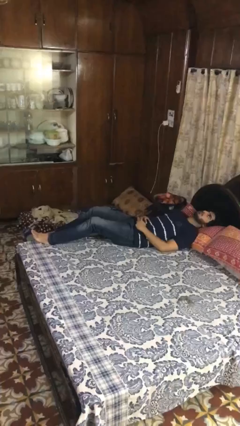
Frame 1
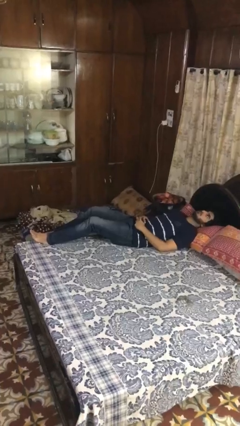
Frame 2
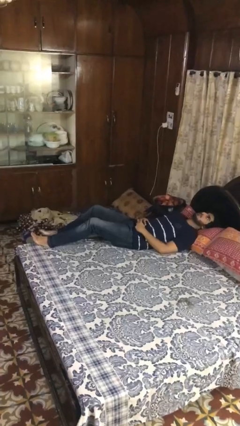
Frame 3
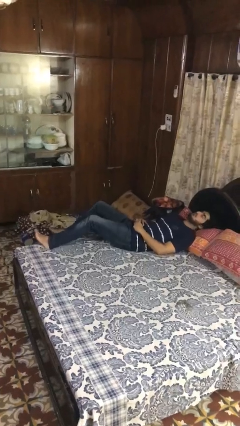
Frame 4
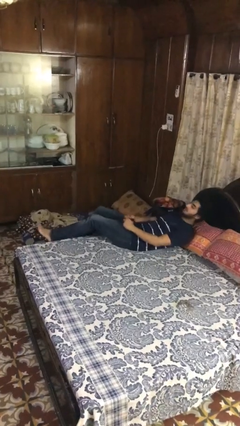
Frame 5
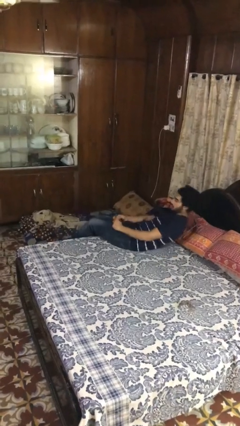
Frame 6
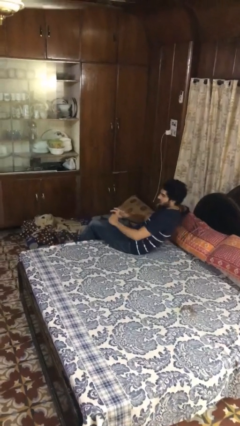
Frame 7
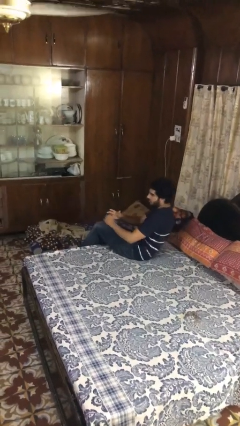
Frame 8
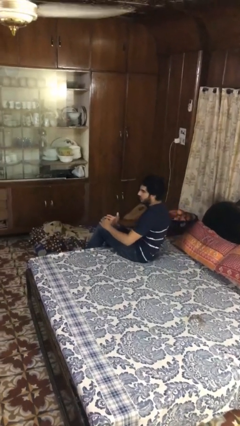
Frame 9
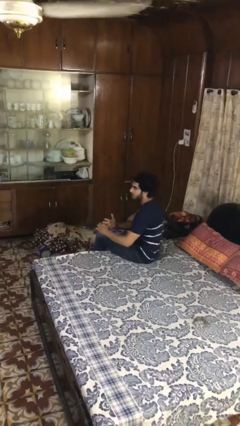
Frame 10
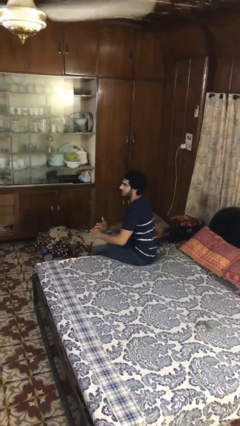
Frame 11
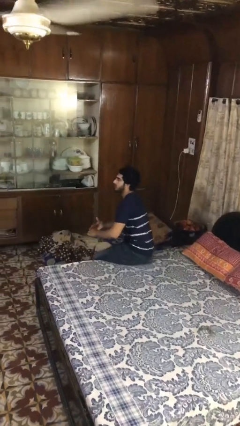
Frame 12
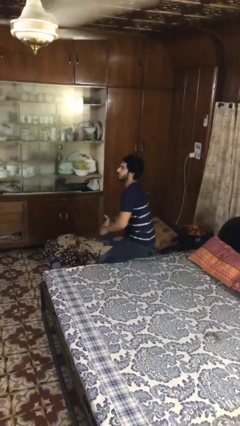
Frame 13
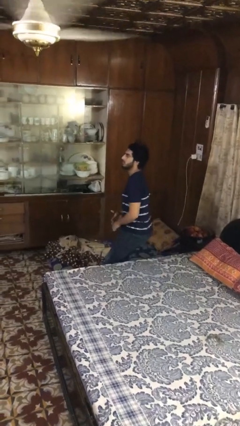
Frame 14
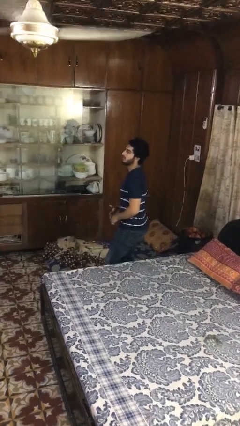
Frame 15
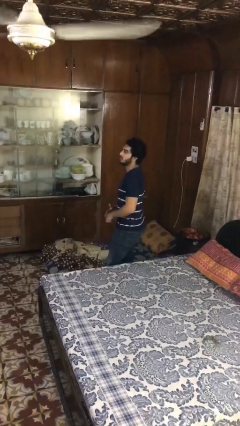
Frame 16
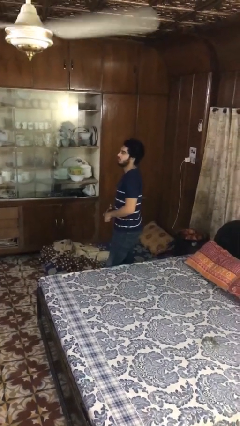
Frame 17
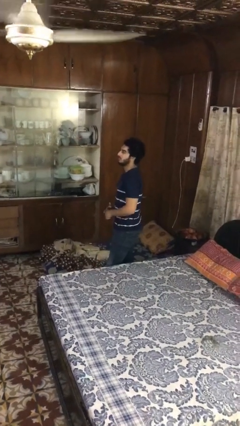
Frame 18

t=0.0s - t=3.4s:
person stands up

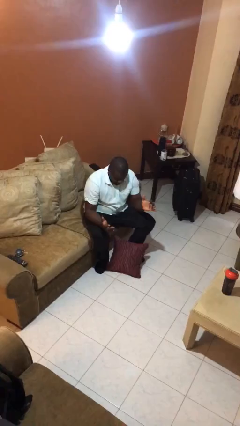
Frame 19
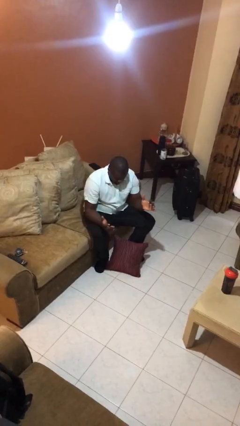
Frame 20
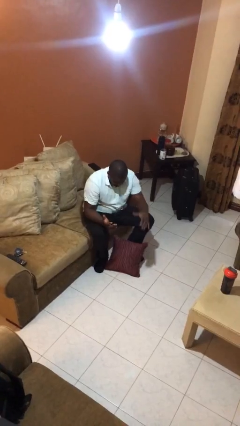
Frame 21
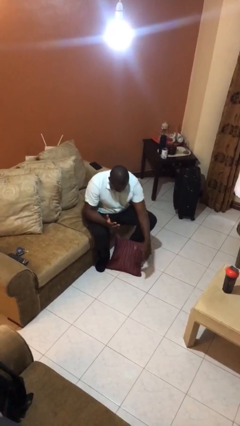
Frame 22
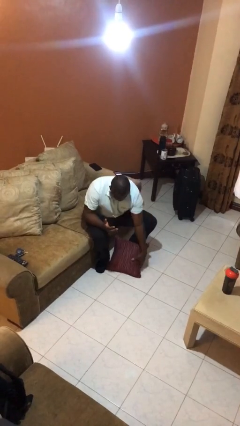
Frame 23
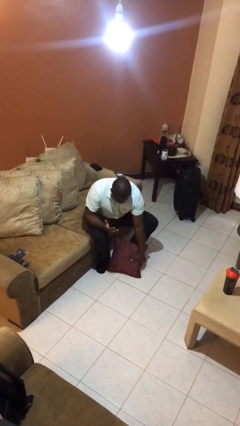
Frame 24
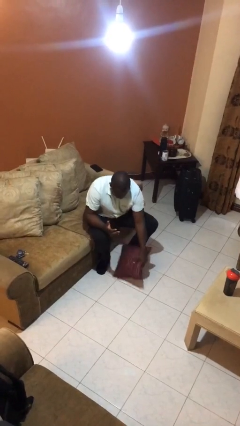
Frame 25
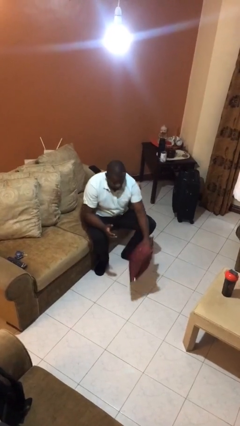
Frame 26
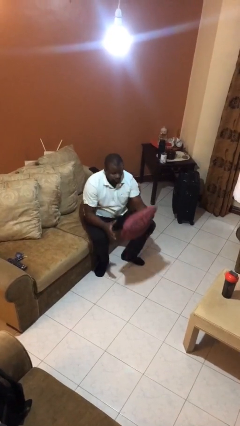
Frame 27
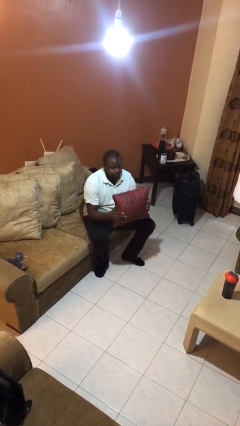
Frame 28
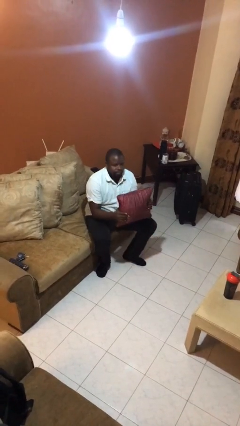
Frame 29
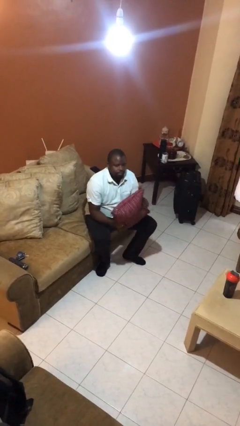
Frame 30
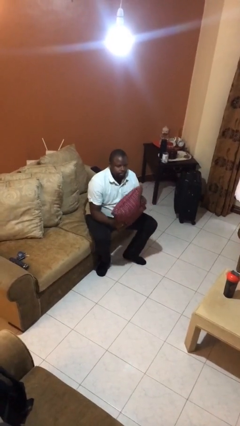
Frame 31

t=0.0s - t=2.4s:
person picks up object from floor

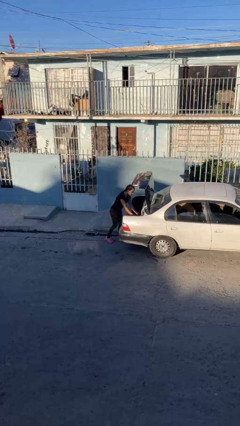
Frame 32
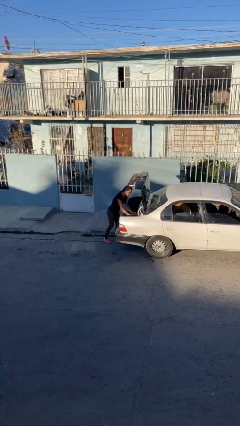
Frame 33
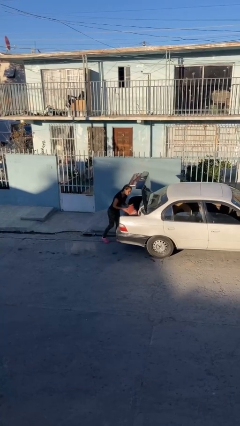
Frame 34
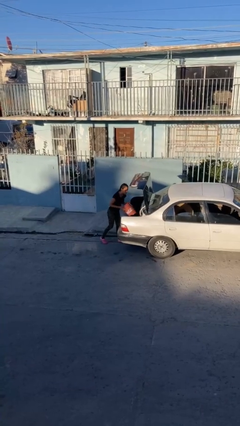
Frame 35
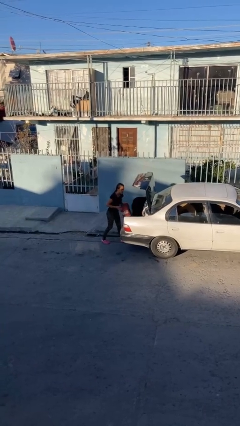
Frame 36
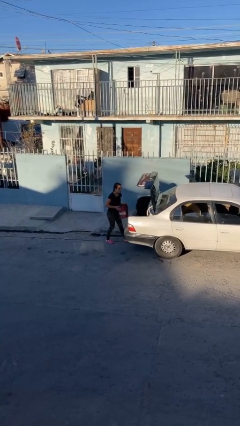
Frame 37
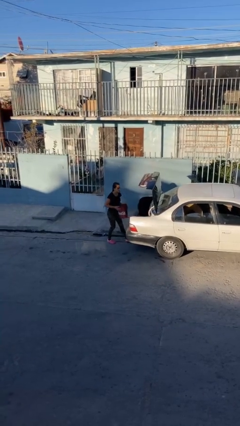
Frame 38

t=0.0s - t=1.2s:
person unloads car

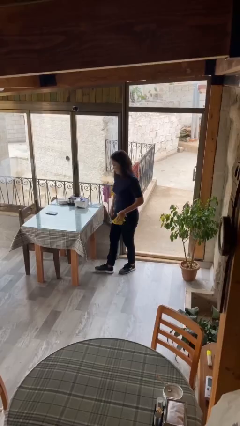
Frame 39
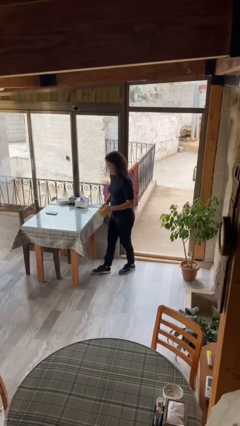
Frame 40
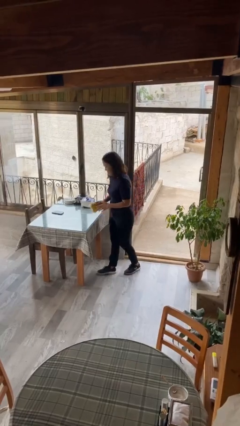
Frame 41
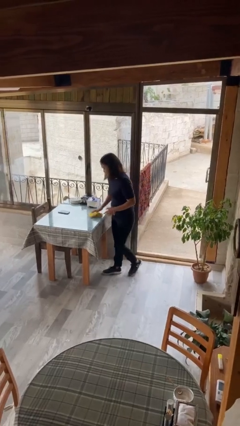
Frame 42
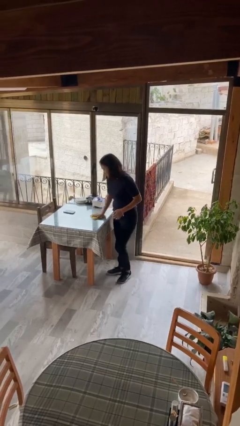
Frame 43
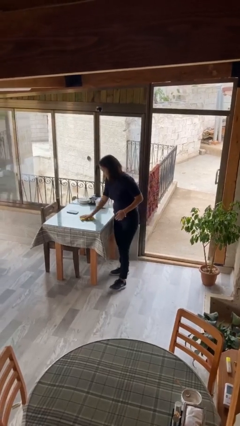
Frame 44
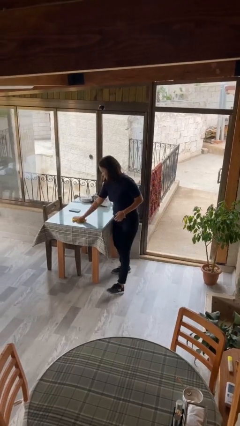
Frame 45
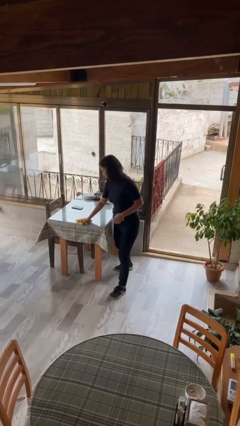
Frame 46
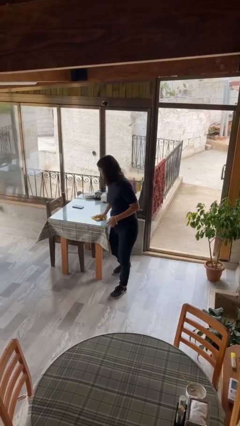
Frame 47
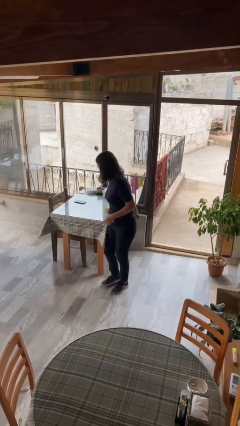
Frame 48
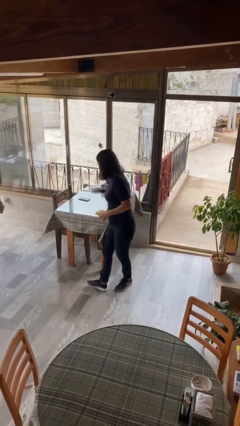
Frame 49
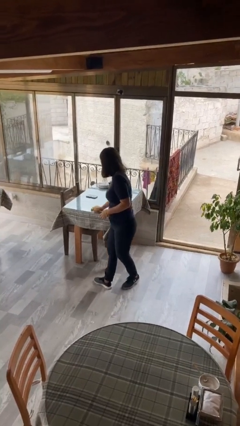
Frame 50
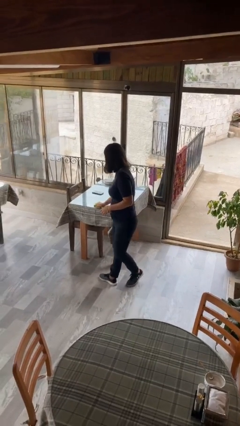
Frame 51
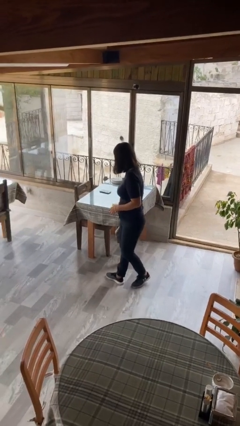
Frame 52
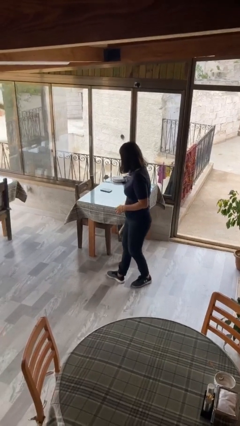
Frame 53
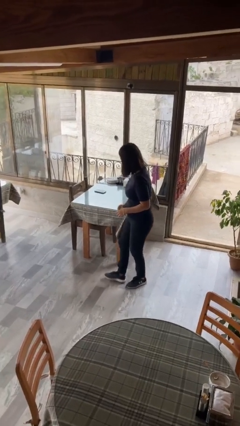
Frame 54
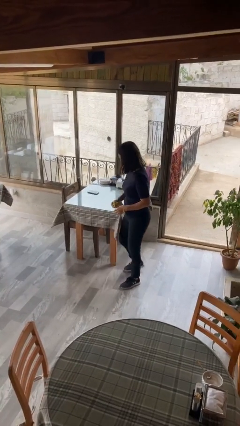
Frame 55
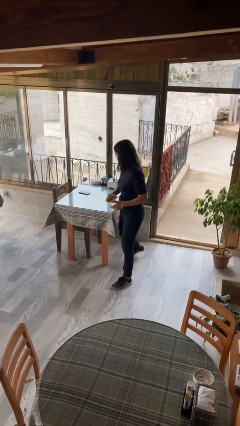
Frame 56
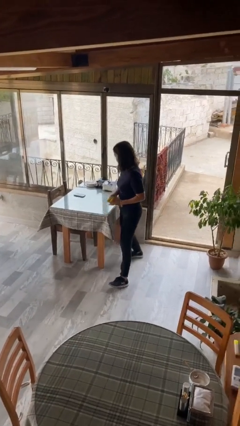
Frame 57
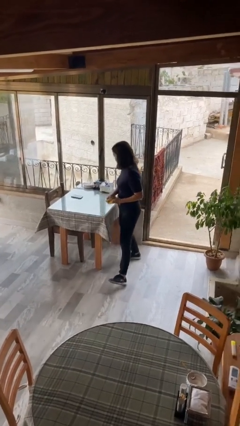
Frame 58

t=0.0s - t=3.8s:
person cleans table with rag

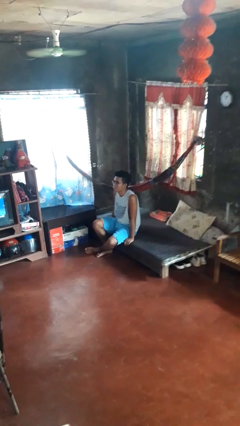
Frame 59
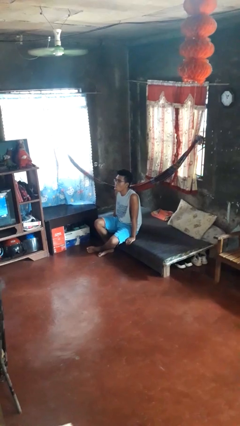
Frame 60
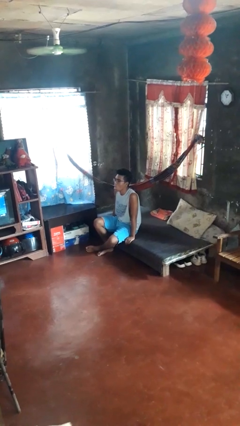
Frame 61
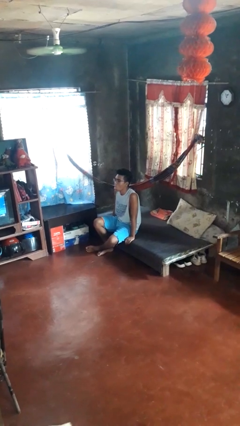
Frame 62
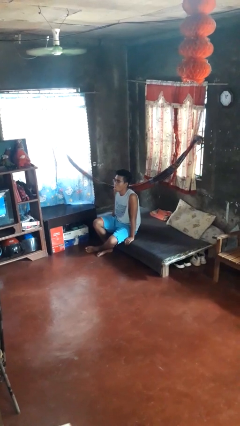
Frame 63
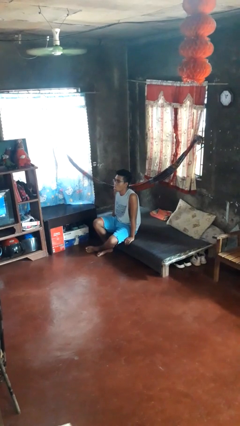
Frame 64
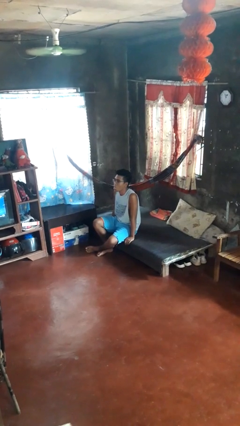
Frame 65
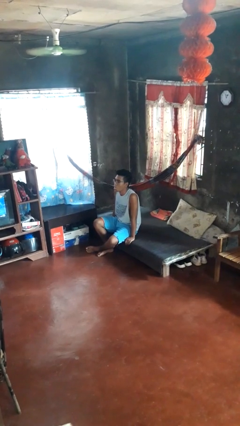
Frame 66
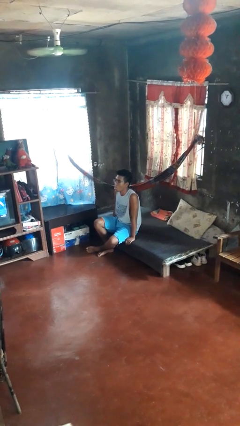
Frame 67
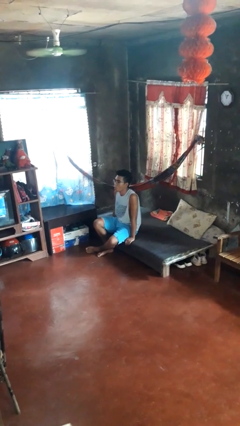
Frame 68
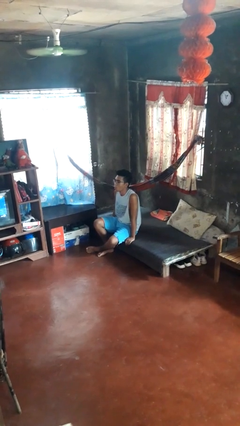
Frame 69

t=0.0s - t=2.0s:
person sticks out tongue

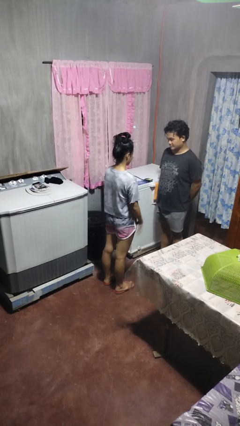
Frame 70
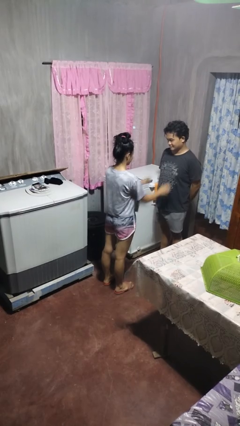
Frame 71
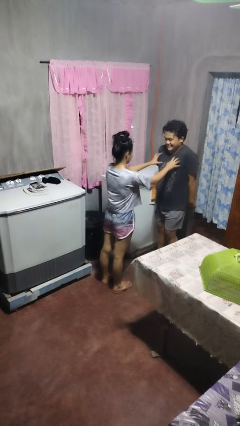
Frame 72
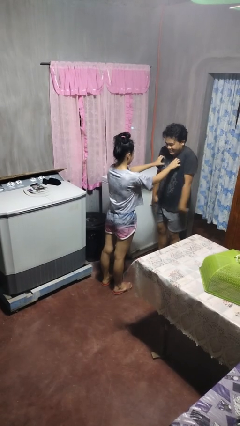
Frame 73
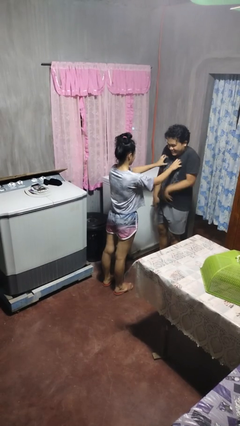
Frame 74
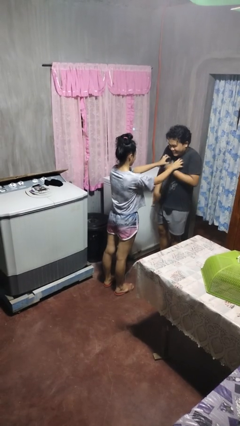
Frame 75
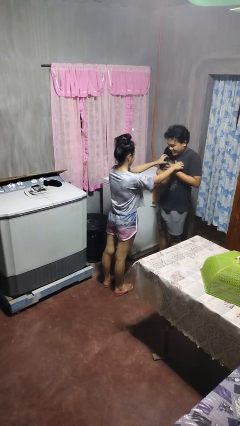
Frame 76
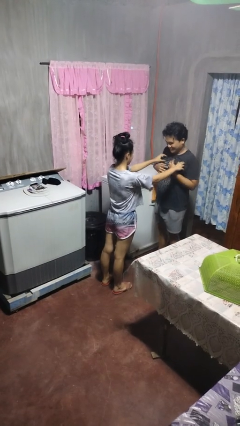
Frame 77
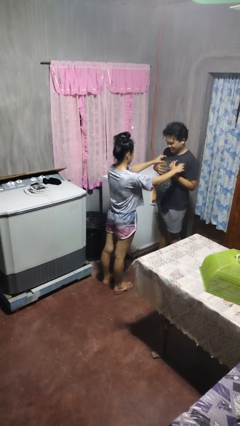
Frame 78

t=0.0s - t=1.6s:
person tickles person

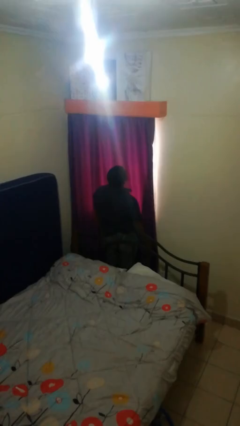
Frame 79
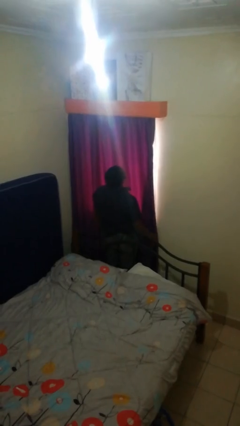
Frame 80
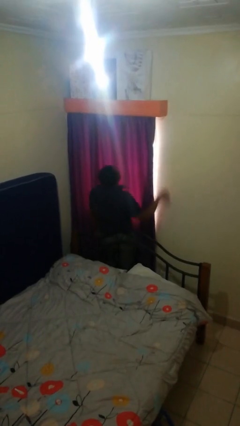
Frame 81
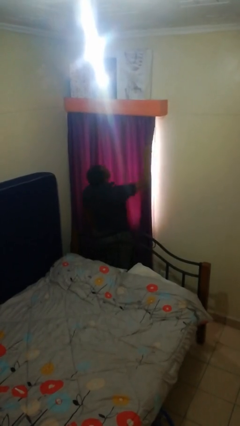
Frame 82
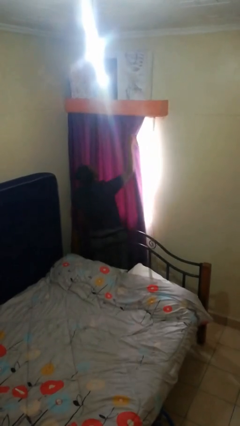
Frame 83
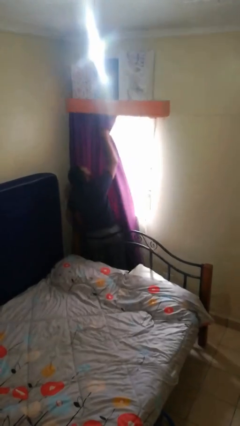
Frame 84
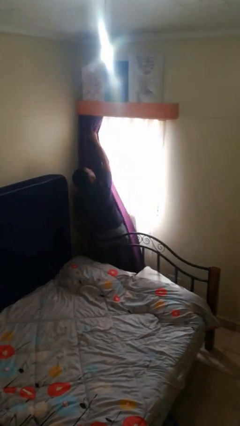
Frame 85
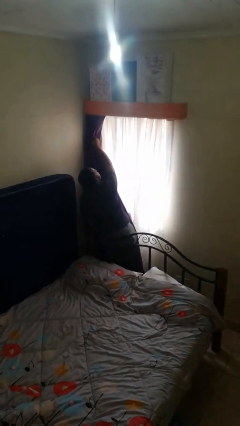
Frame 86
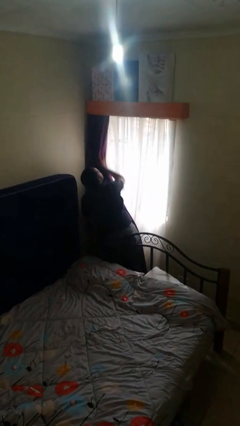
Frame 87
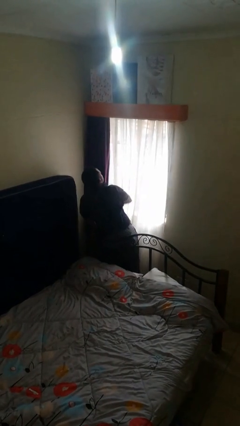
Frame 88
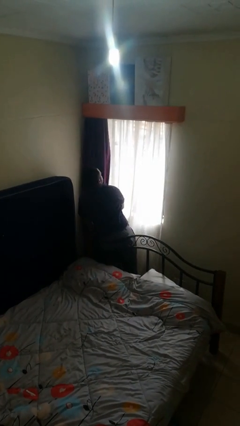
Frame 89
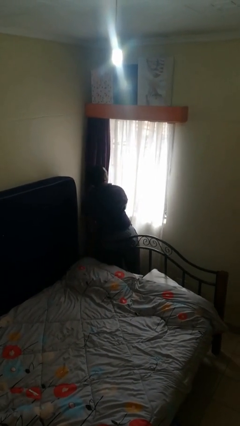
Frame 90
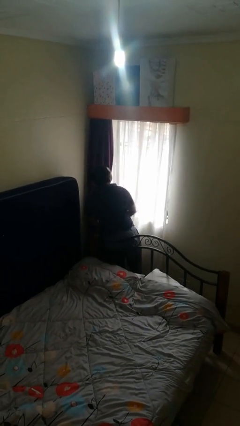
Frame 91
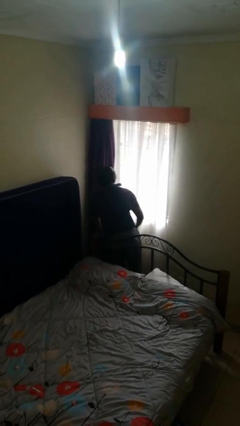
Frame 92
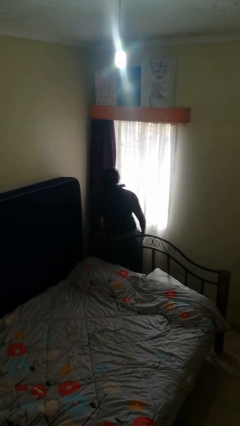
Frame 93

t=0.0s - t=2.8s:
person opens curtains
